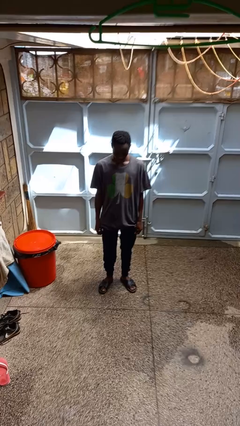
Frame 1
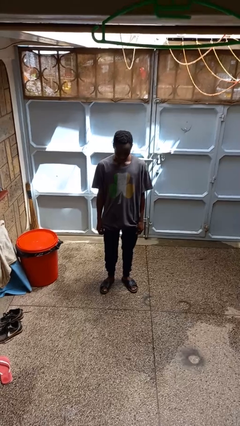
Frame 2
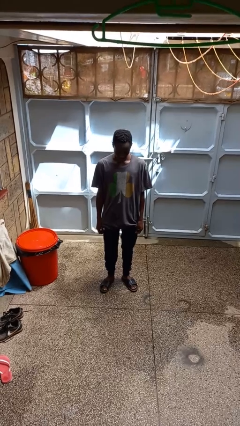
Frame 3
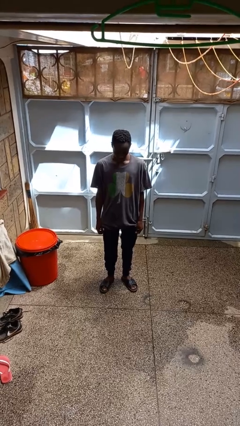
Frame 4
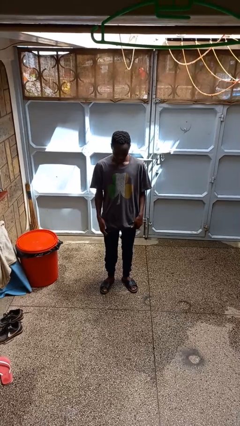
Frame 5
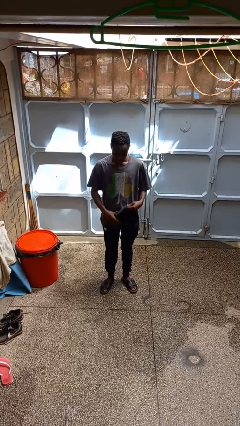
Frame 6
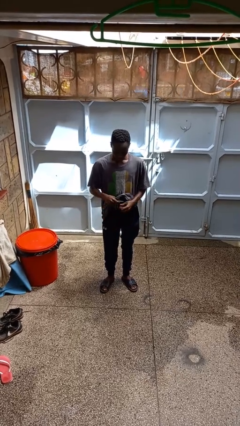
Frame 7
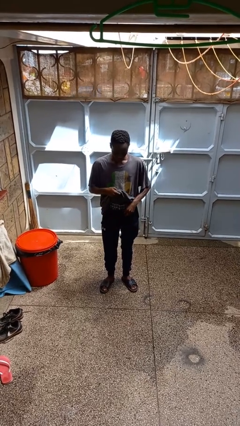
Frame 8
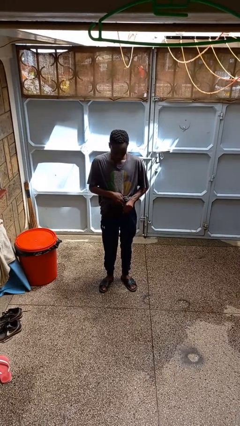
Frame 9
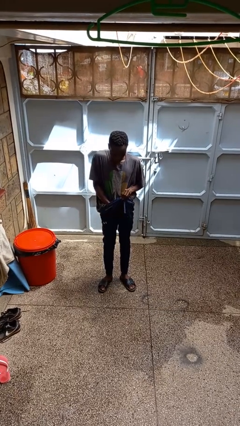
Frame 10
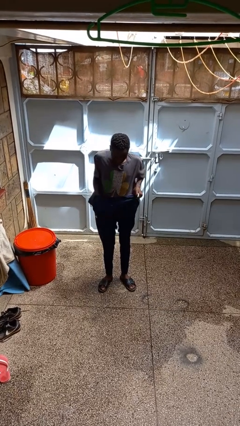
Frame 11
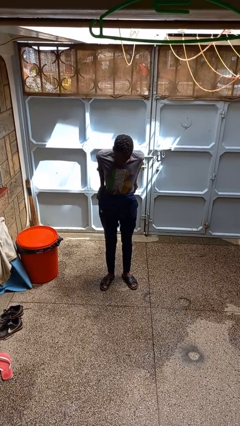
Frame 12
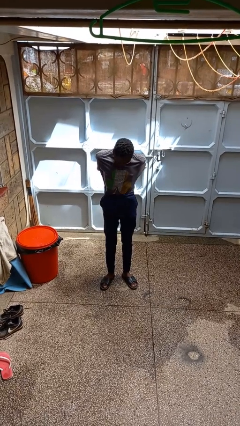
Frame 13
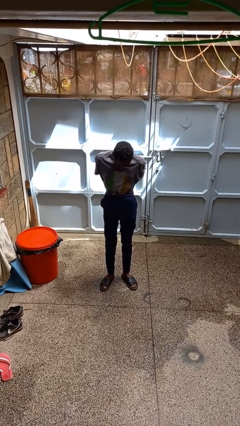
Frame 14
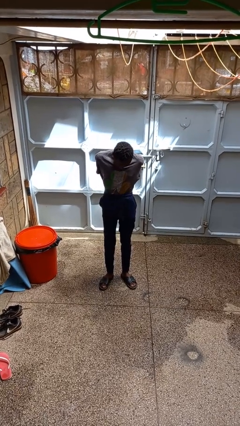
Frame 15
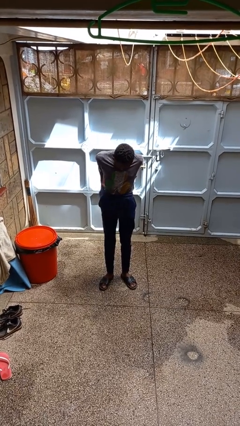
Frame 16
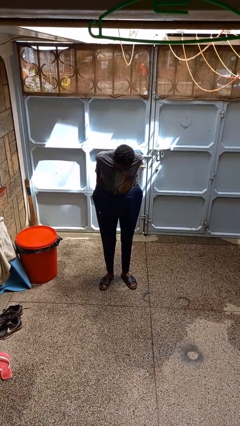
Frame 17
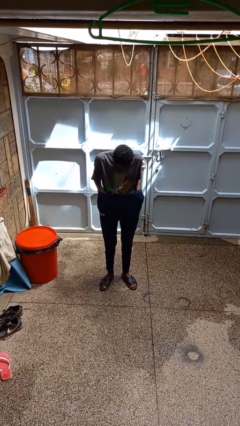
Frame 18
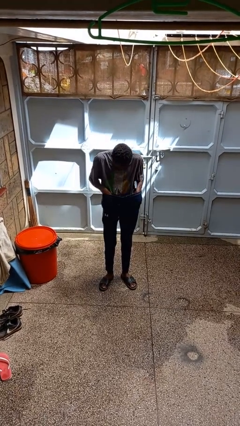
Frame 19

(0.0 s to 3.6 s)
person tucks in shirt

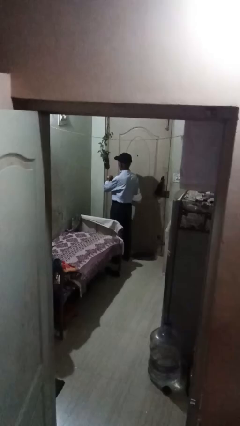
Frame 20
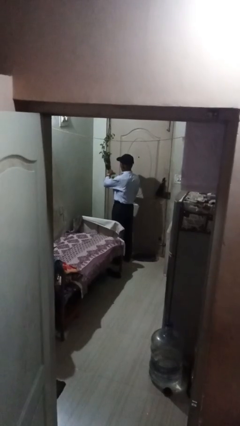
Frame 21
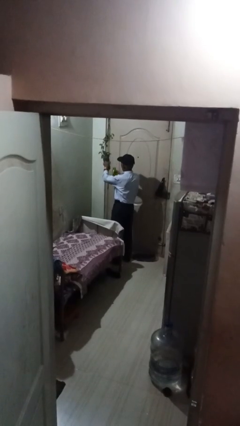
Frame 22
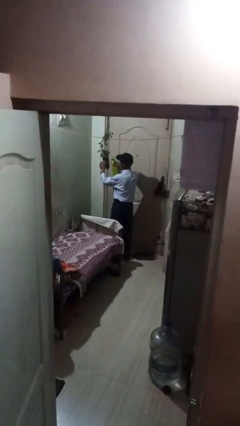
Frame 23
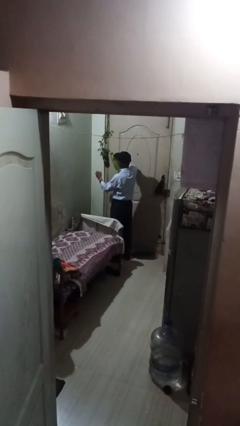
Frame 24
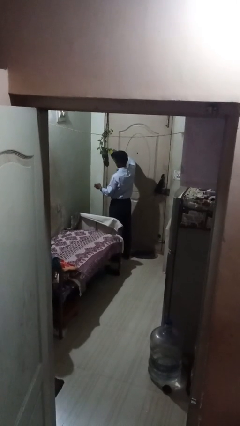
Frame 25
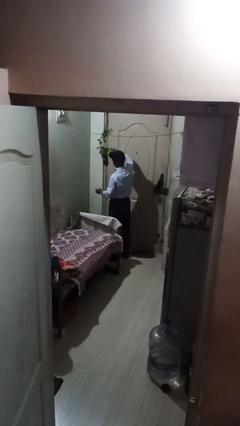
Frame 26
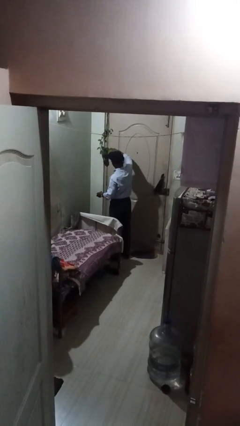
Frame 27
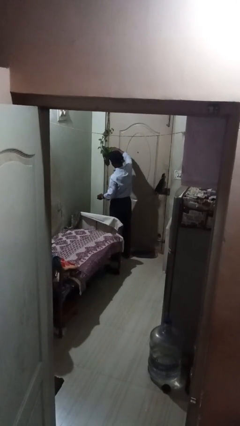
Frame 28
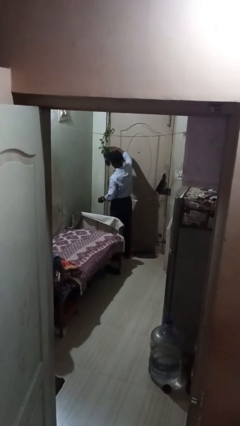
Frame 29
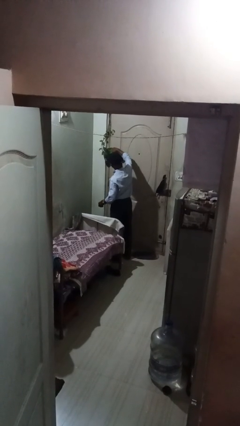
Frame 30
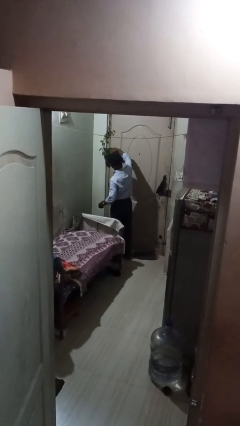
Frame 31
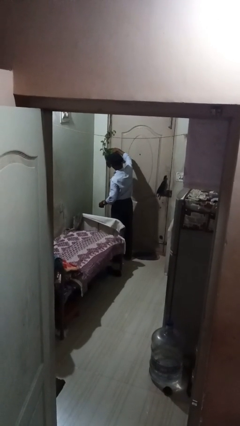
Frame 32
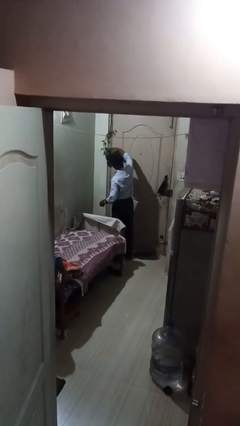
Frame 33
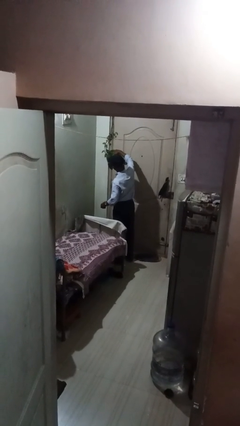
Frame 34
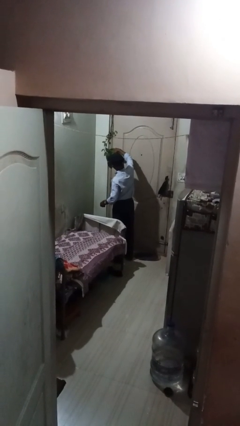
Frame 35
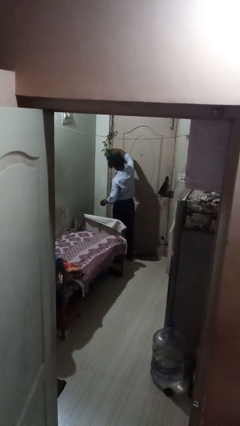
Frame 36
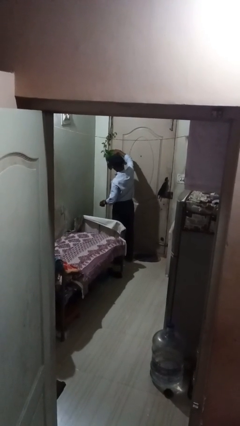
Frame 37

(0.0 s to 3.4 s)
person waters houseplant

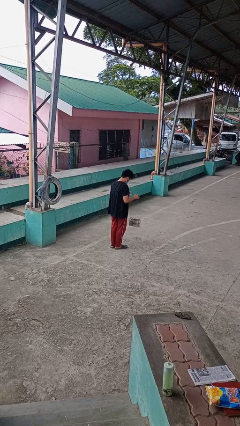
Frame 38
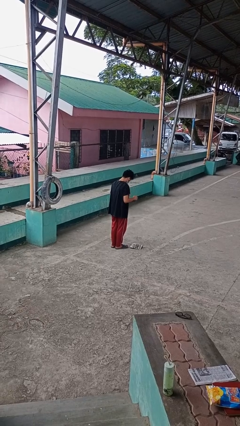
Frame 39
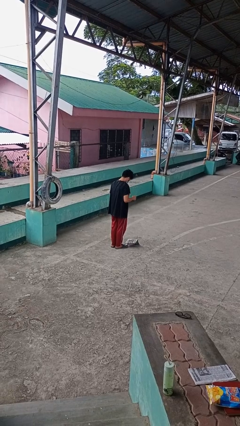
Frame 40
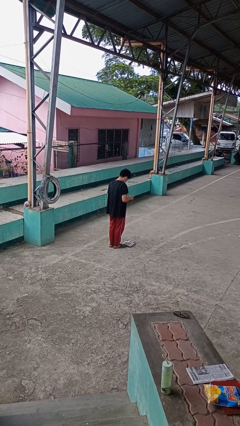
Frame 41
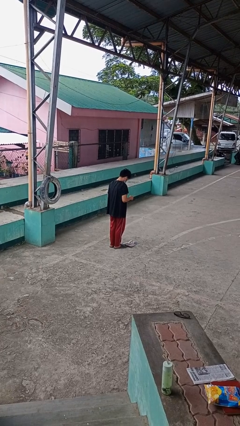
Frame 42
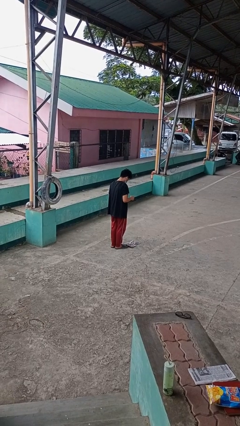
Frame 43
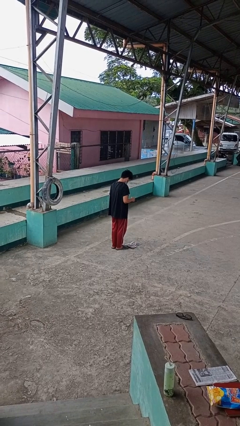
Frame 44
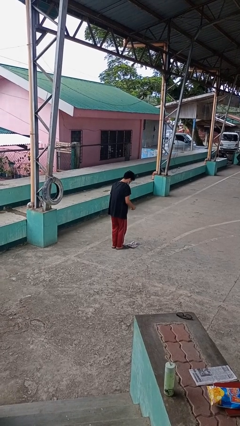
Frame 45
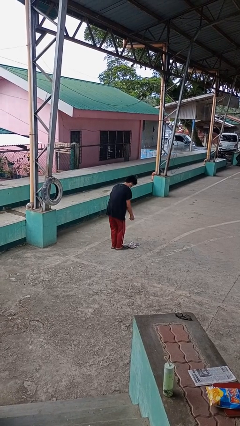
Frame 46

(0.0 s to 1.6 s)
person drops object

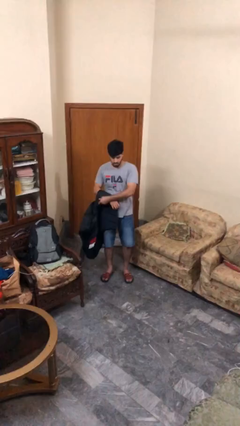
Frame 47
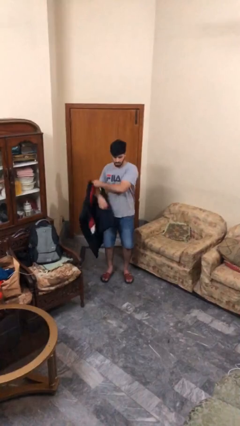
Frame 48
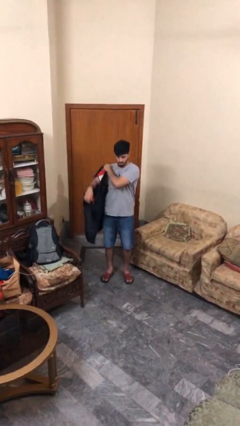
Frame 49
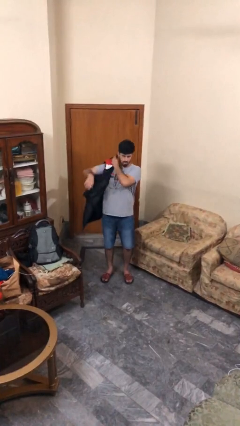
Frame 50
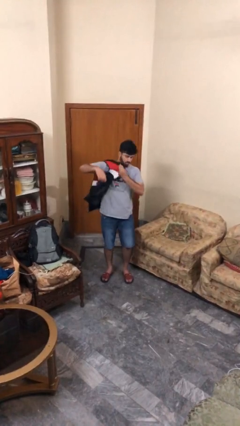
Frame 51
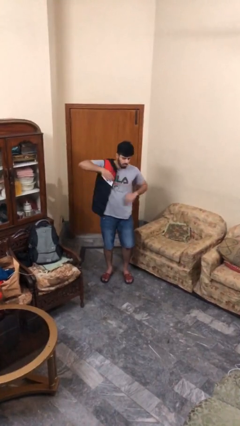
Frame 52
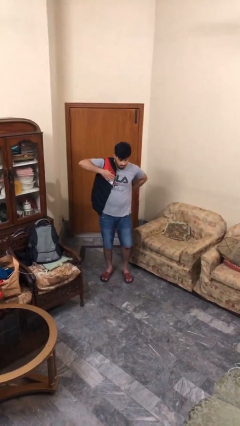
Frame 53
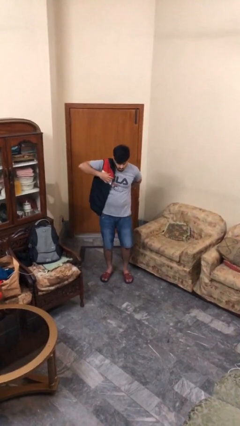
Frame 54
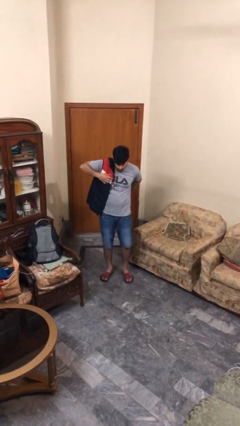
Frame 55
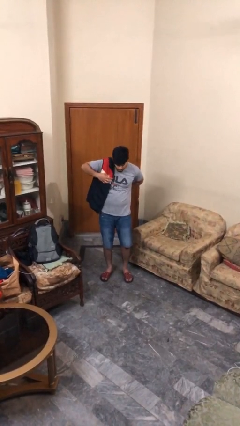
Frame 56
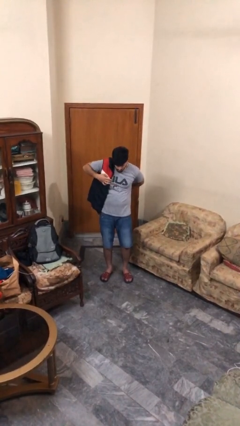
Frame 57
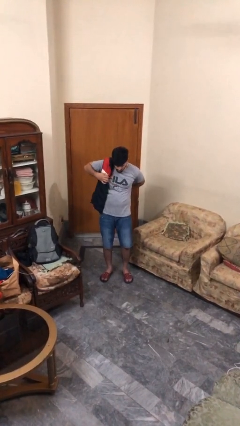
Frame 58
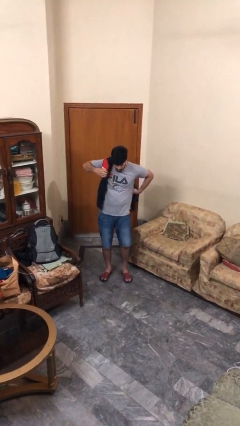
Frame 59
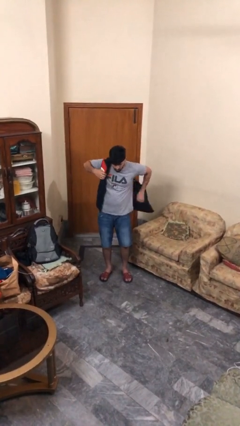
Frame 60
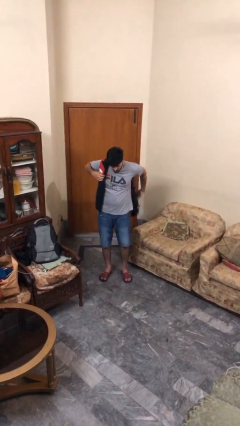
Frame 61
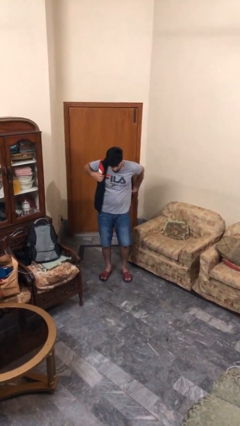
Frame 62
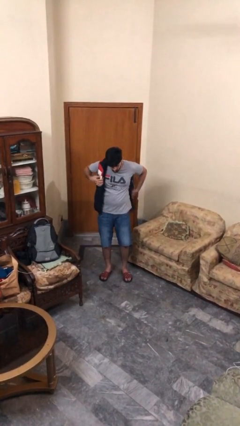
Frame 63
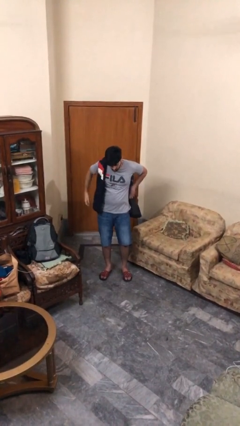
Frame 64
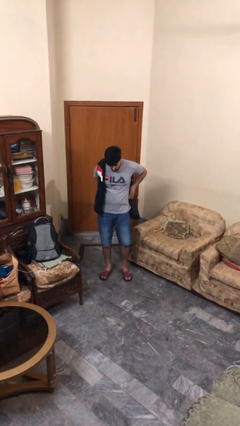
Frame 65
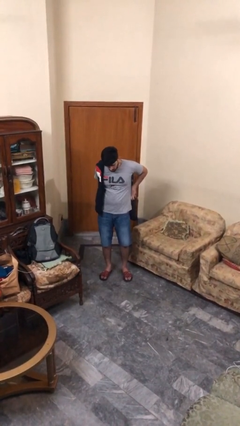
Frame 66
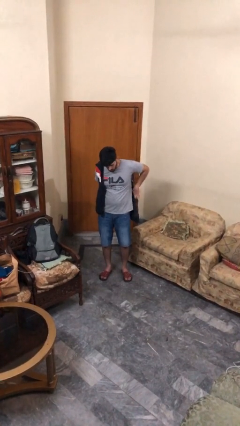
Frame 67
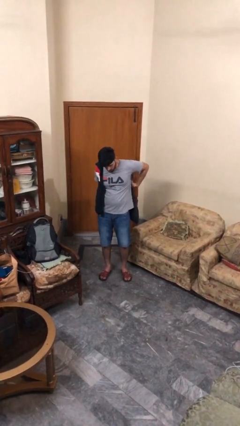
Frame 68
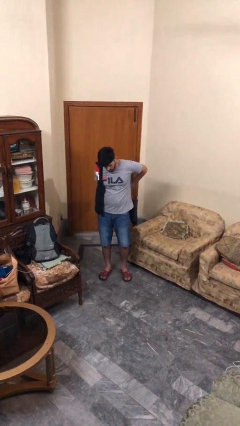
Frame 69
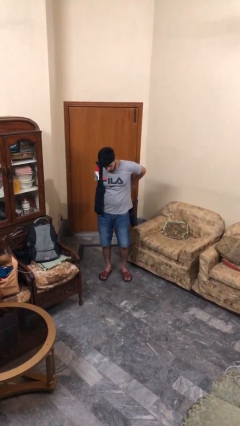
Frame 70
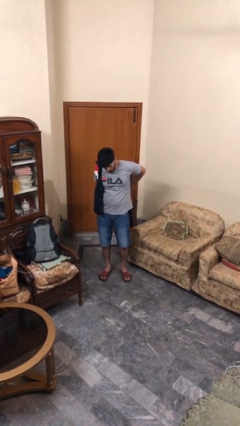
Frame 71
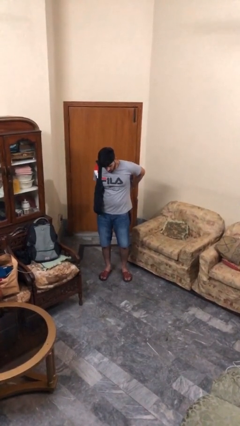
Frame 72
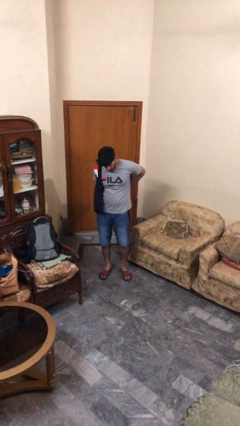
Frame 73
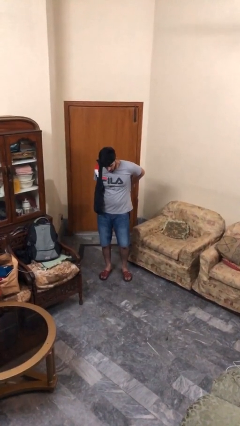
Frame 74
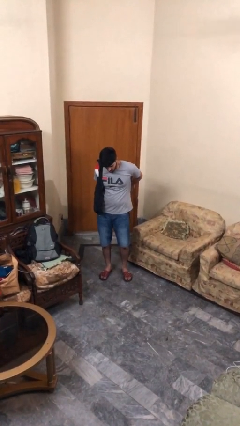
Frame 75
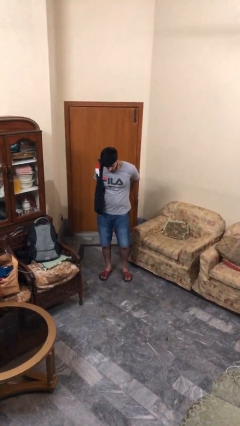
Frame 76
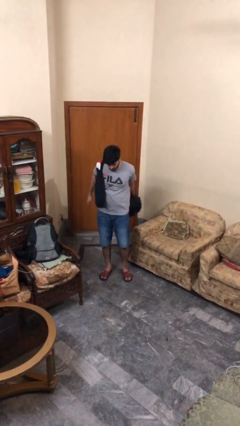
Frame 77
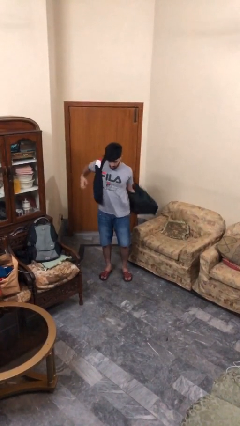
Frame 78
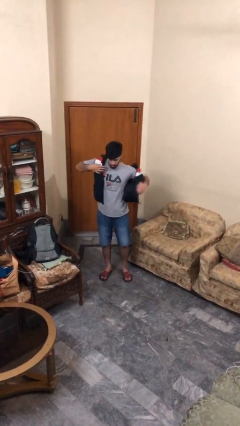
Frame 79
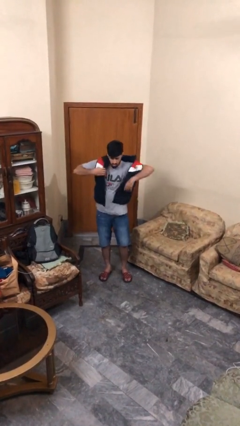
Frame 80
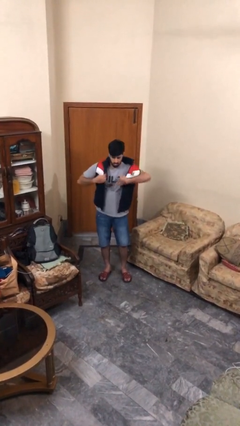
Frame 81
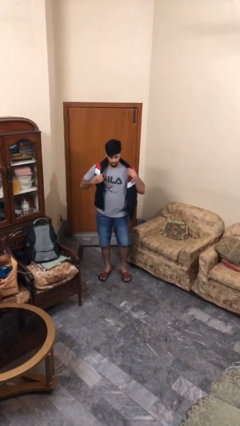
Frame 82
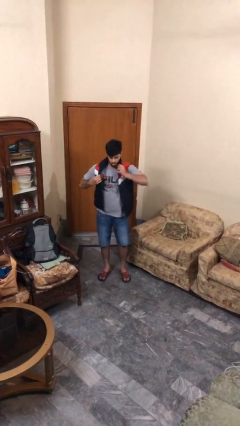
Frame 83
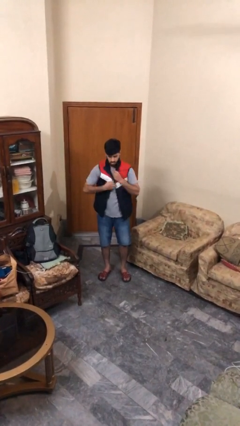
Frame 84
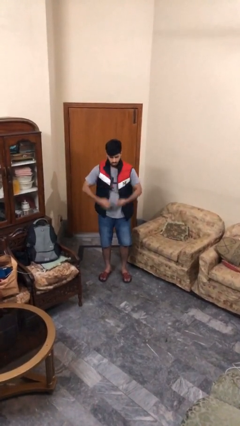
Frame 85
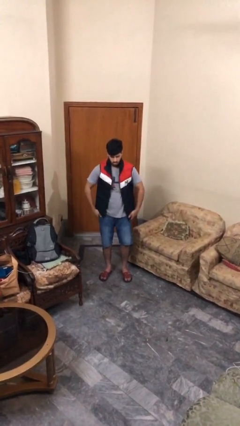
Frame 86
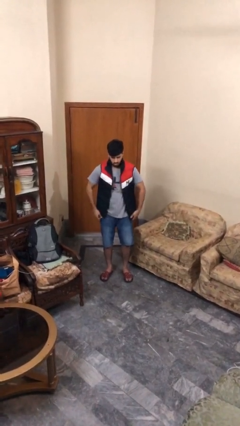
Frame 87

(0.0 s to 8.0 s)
person puts on jacket

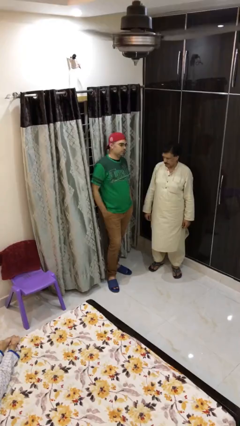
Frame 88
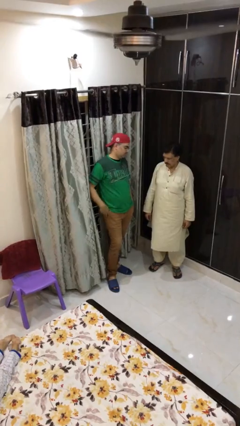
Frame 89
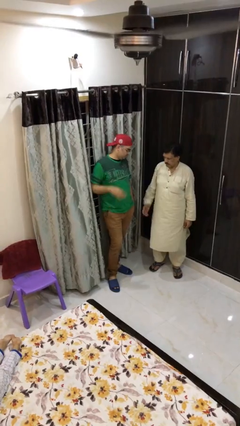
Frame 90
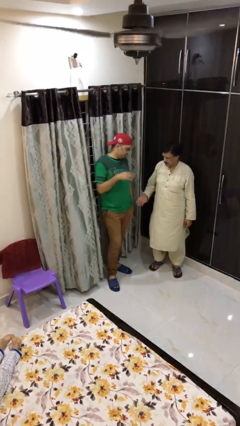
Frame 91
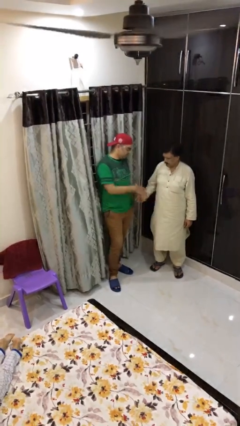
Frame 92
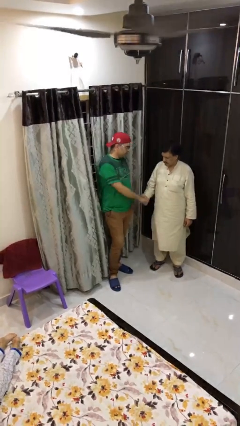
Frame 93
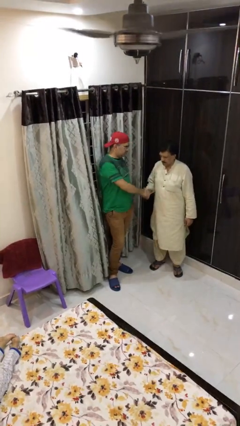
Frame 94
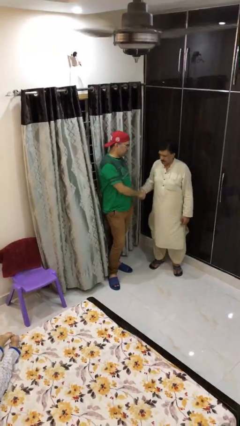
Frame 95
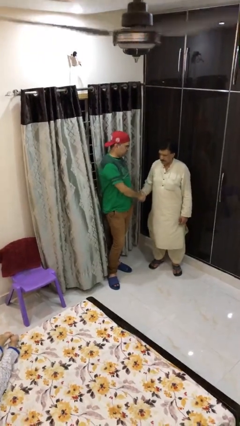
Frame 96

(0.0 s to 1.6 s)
person shakes hand
